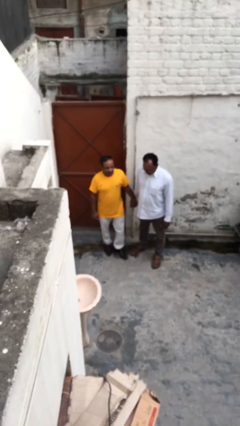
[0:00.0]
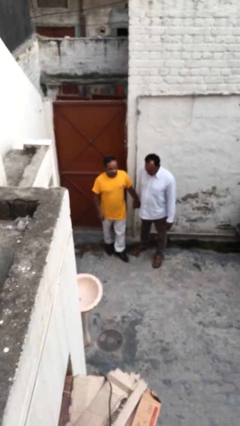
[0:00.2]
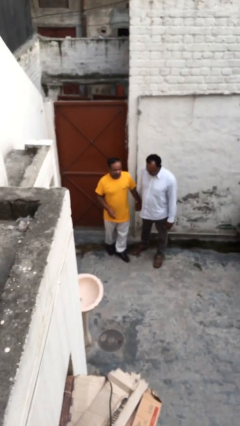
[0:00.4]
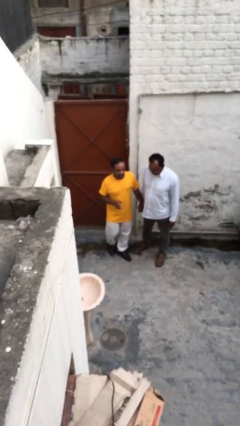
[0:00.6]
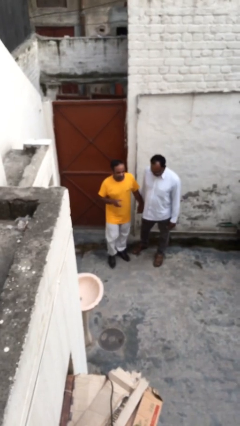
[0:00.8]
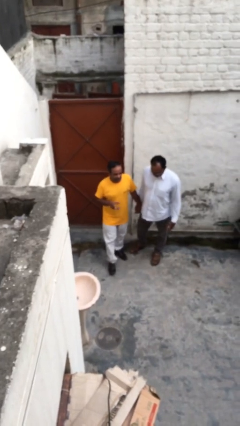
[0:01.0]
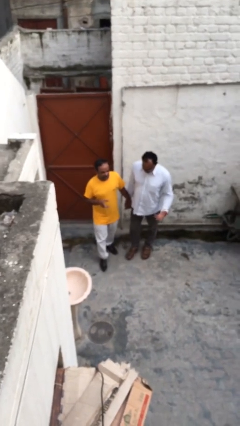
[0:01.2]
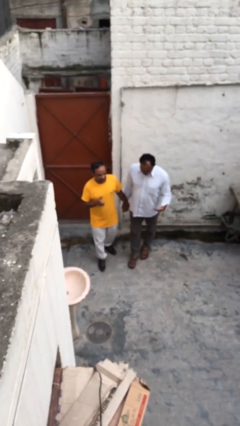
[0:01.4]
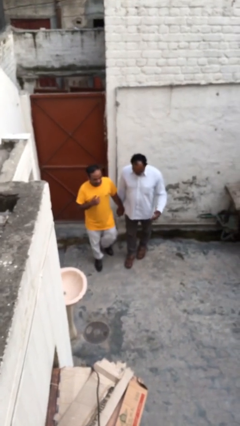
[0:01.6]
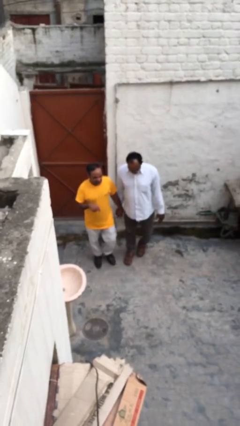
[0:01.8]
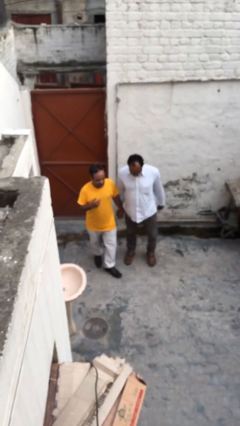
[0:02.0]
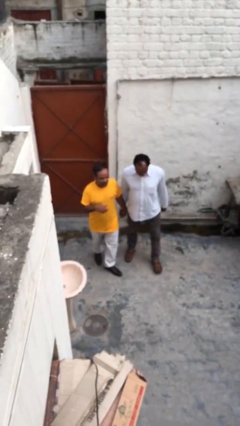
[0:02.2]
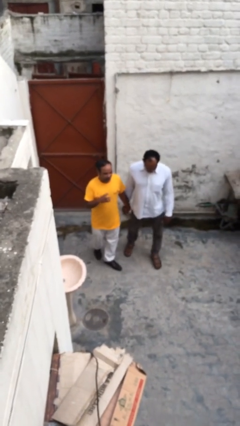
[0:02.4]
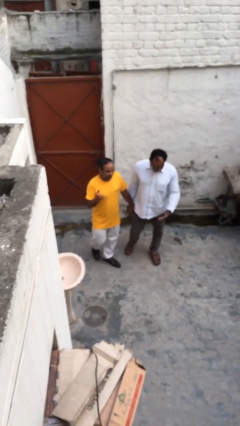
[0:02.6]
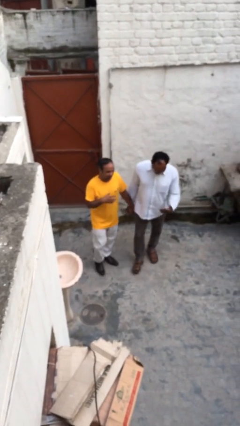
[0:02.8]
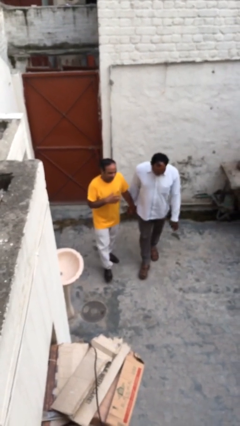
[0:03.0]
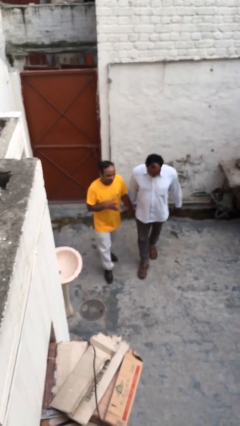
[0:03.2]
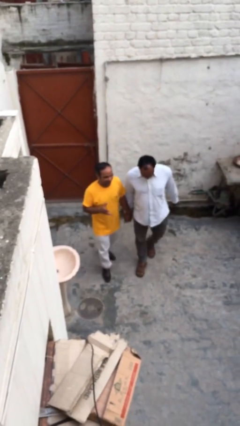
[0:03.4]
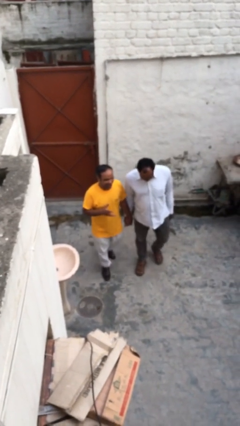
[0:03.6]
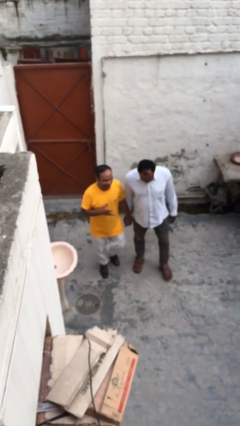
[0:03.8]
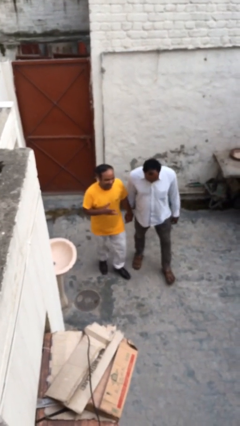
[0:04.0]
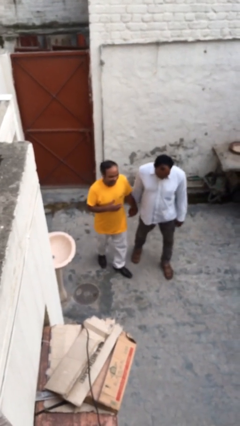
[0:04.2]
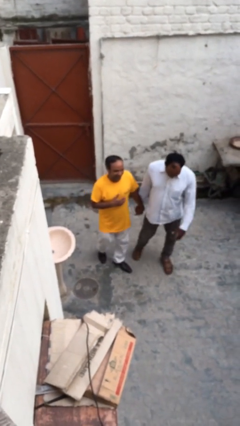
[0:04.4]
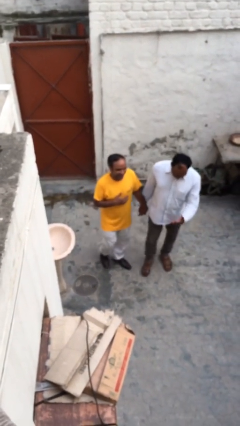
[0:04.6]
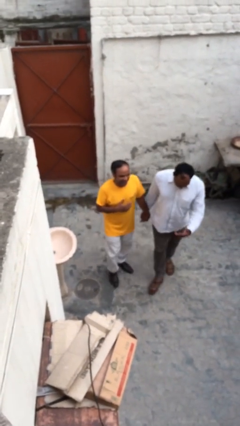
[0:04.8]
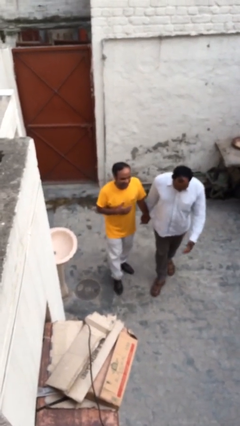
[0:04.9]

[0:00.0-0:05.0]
person holds hand

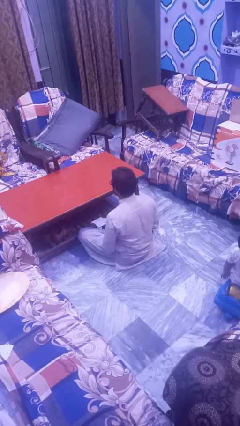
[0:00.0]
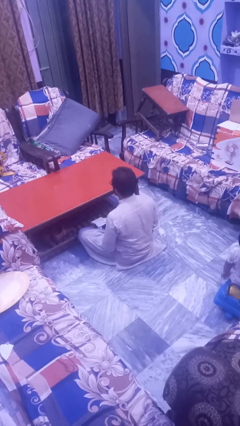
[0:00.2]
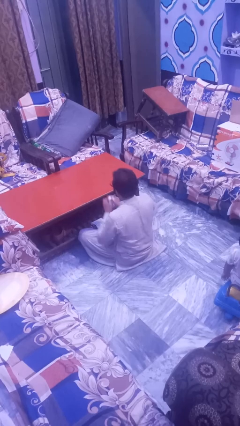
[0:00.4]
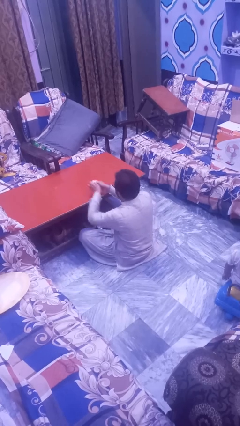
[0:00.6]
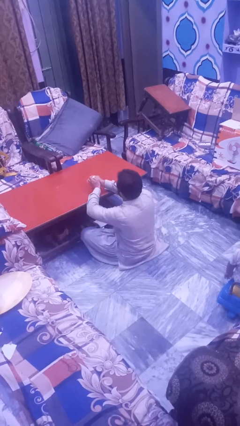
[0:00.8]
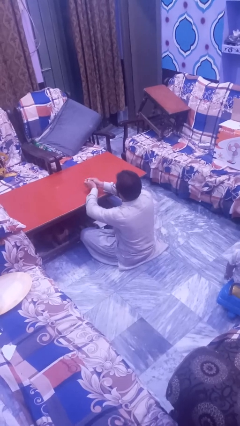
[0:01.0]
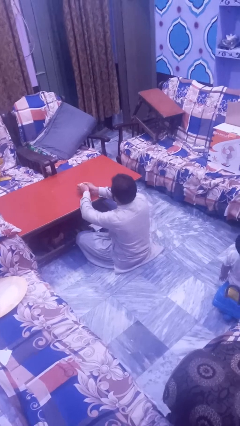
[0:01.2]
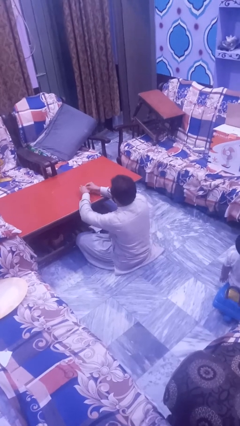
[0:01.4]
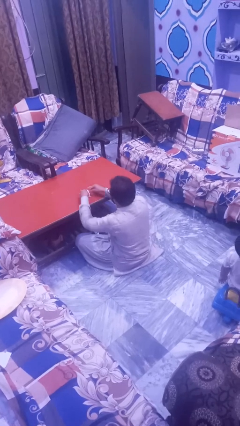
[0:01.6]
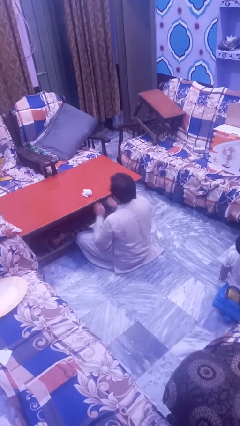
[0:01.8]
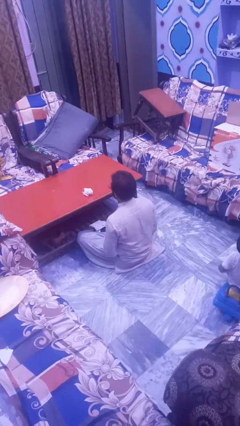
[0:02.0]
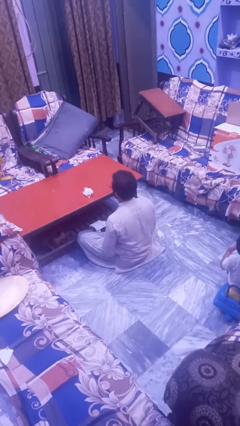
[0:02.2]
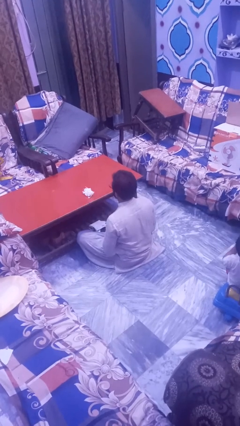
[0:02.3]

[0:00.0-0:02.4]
person crumples paper

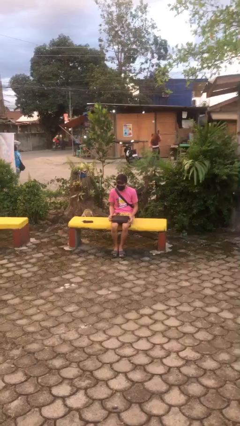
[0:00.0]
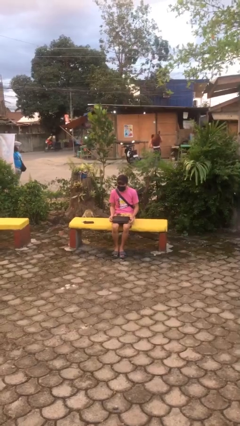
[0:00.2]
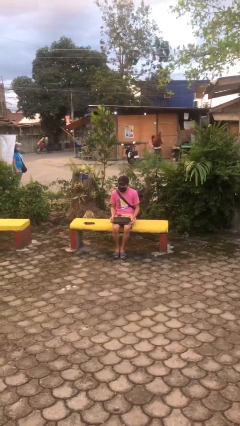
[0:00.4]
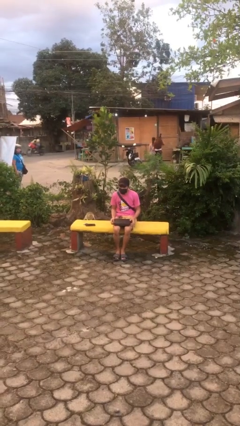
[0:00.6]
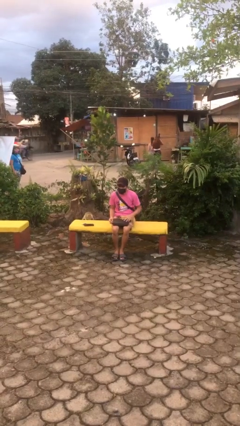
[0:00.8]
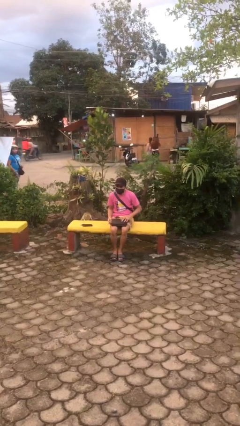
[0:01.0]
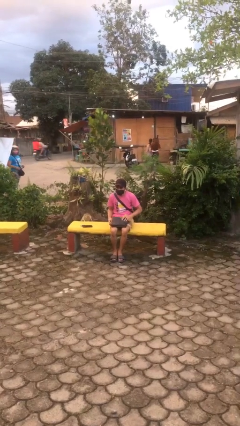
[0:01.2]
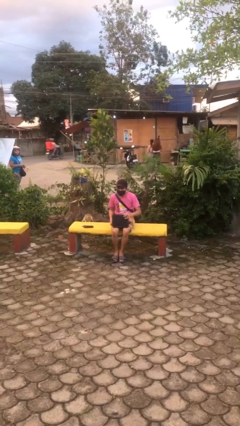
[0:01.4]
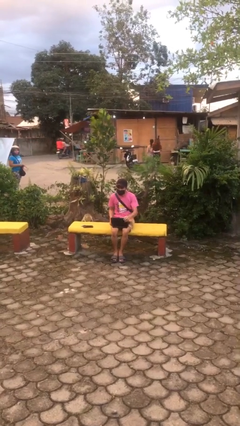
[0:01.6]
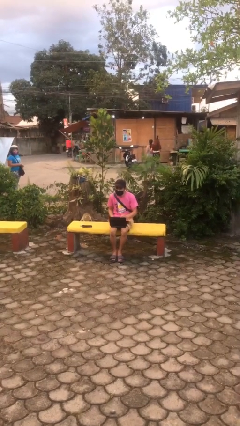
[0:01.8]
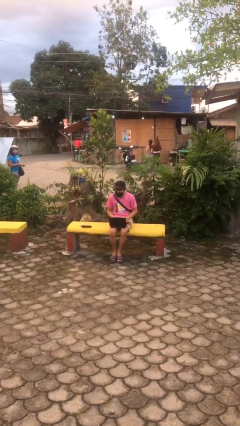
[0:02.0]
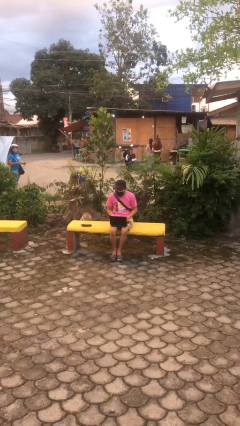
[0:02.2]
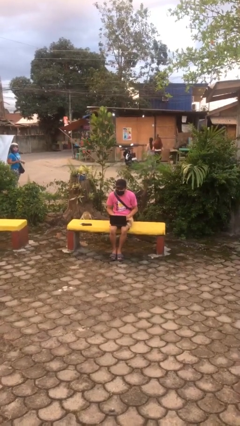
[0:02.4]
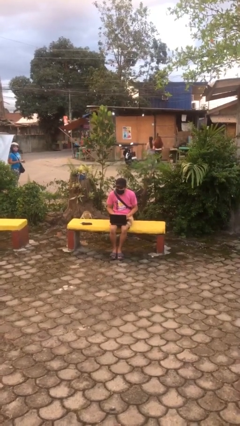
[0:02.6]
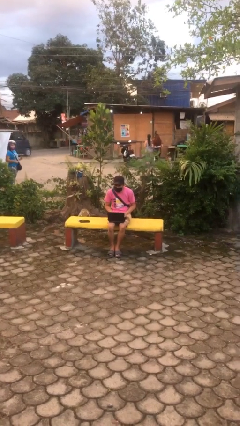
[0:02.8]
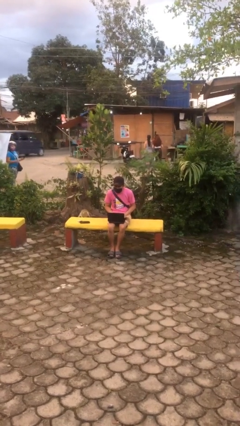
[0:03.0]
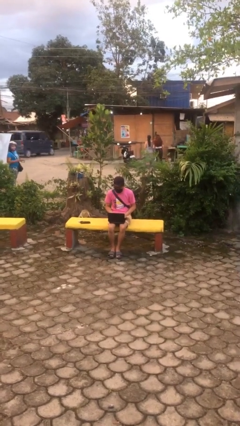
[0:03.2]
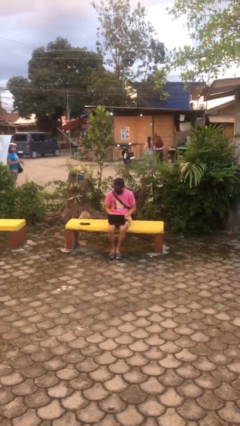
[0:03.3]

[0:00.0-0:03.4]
person interacts with laptop

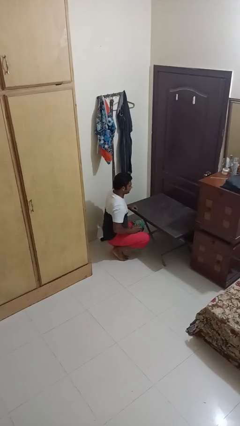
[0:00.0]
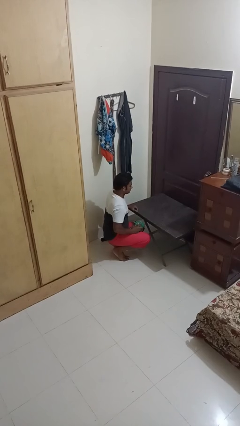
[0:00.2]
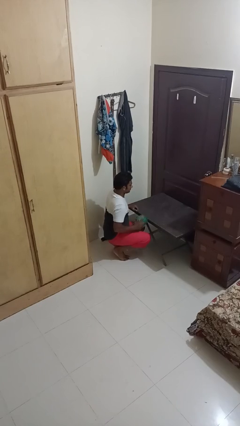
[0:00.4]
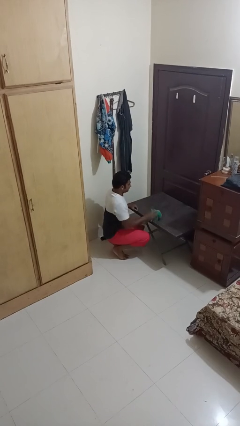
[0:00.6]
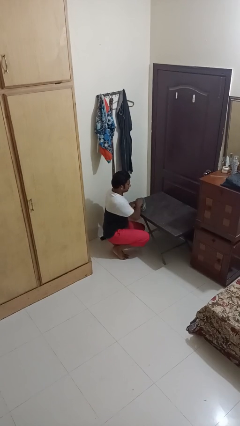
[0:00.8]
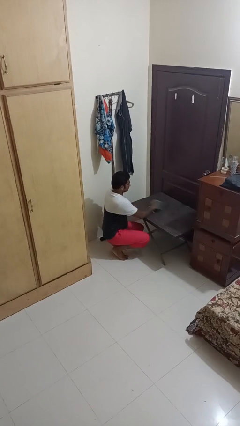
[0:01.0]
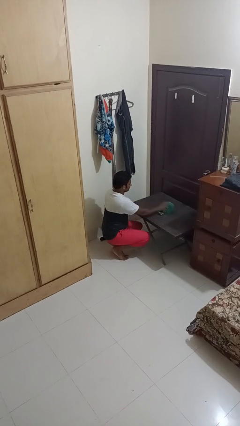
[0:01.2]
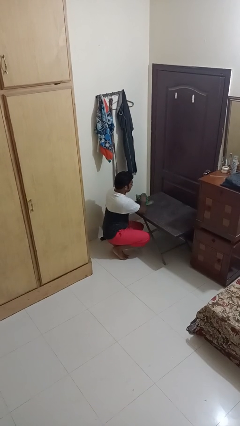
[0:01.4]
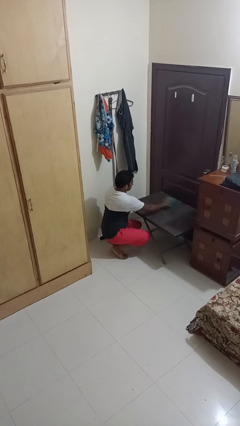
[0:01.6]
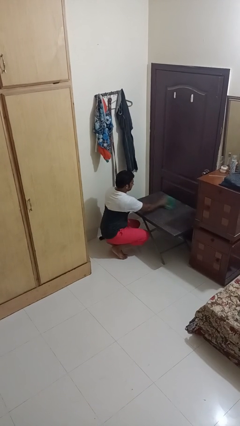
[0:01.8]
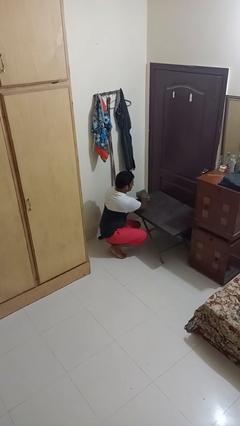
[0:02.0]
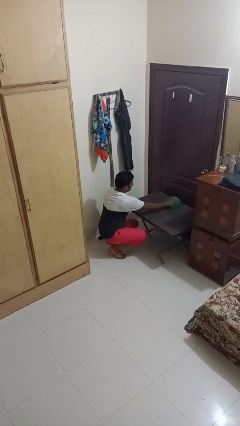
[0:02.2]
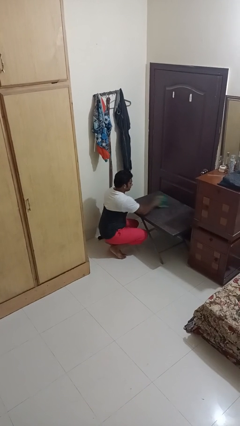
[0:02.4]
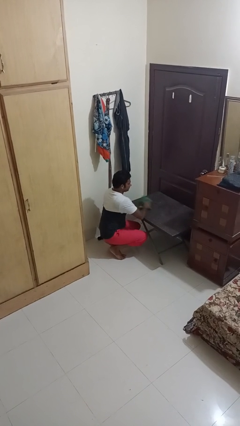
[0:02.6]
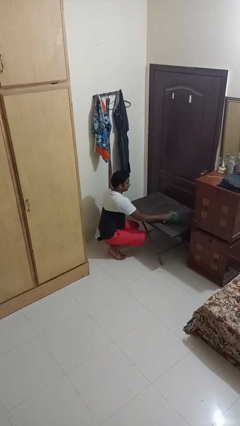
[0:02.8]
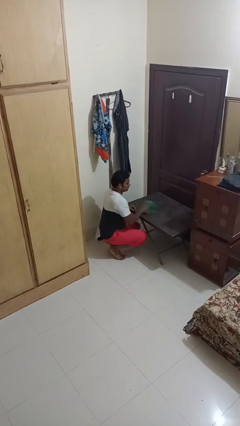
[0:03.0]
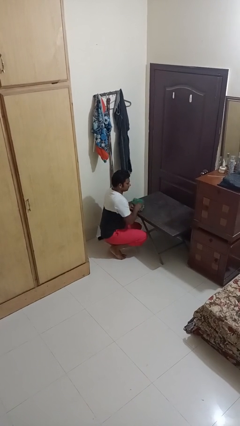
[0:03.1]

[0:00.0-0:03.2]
person cleans table with rag

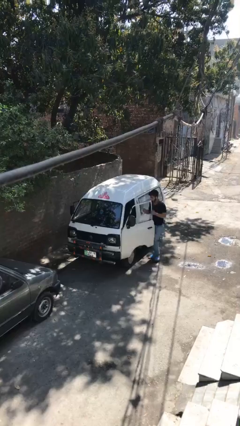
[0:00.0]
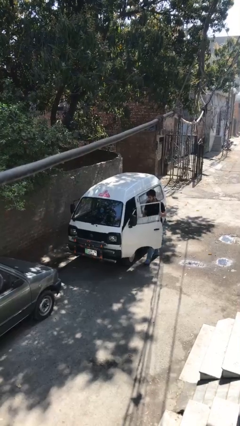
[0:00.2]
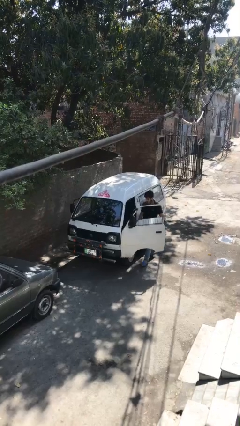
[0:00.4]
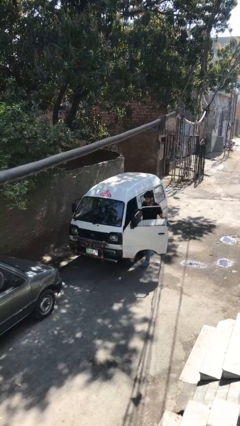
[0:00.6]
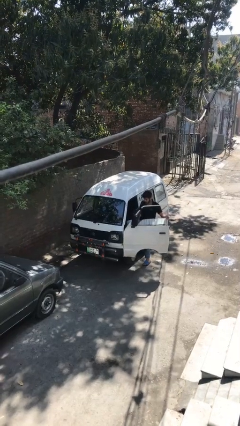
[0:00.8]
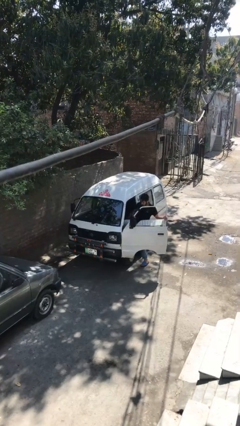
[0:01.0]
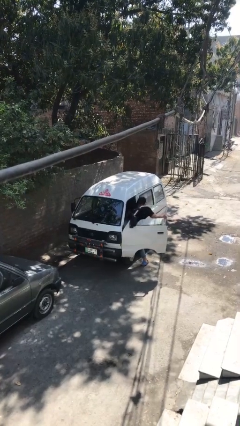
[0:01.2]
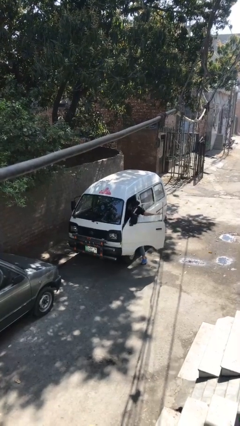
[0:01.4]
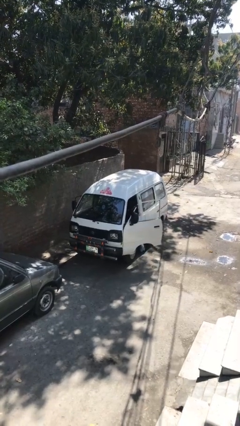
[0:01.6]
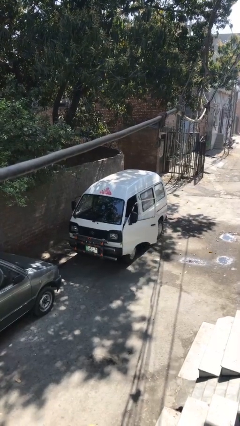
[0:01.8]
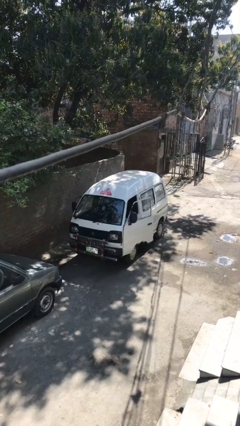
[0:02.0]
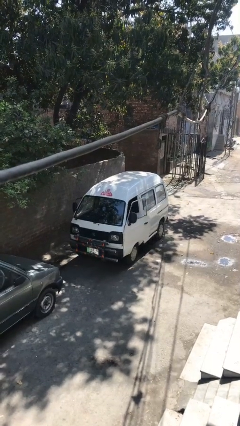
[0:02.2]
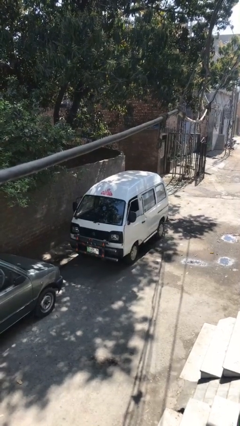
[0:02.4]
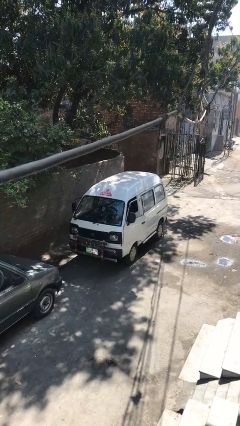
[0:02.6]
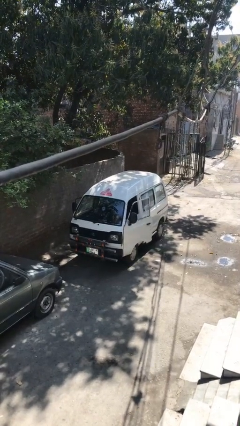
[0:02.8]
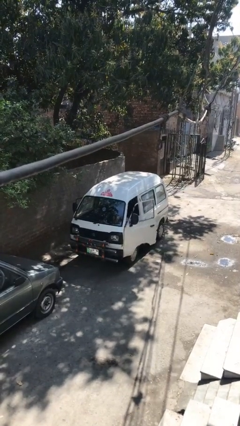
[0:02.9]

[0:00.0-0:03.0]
car picks up person

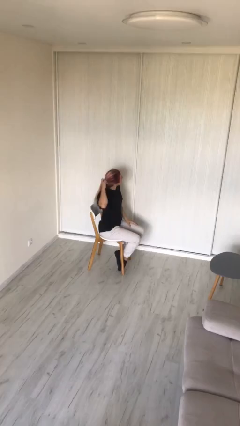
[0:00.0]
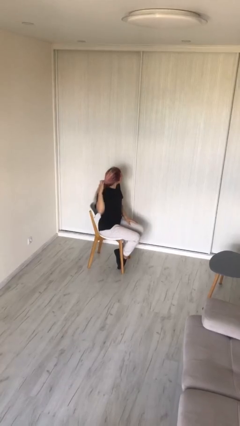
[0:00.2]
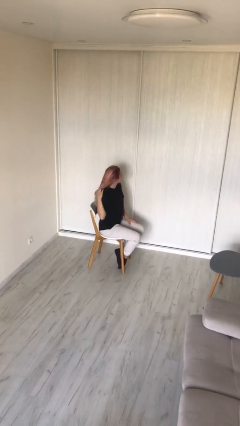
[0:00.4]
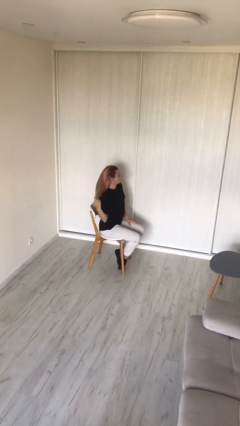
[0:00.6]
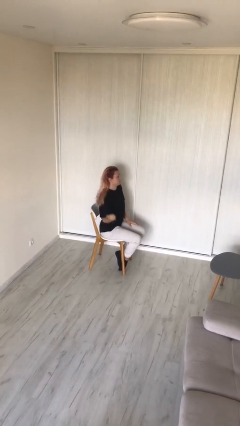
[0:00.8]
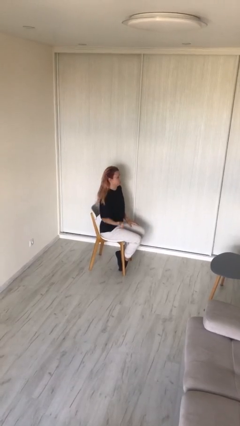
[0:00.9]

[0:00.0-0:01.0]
person takes off hairtie
